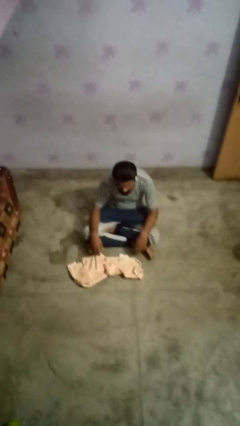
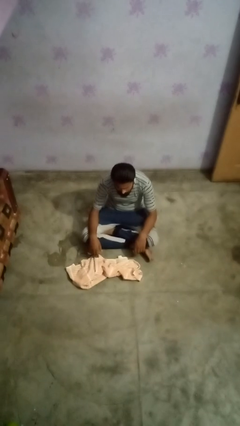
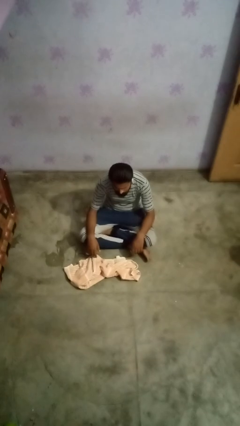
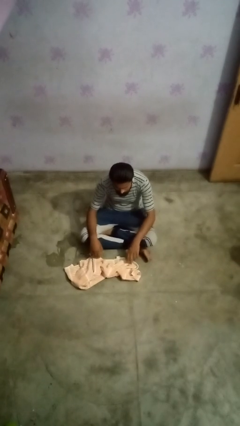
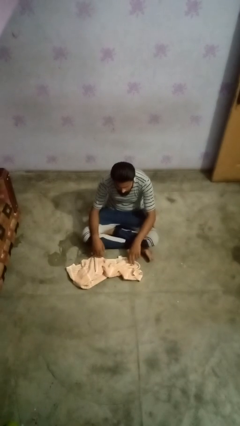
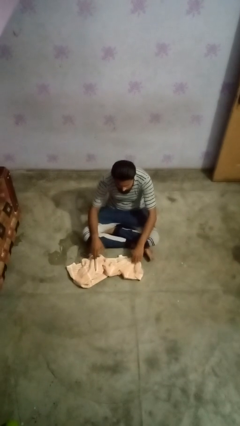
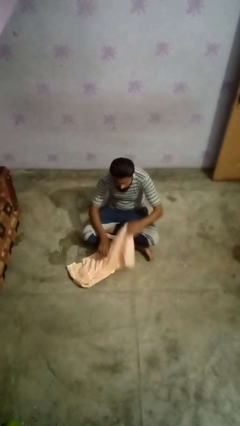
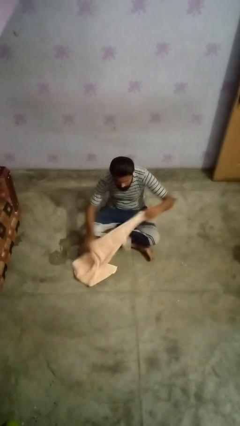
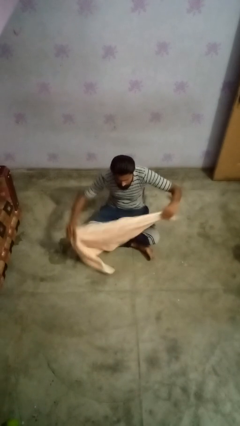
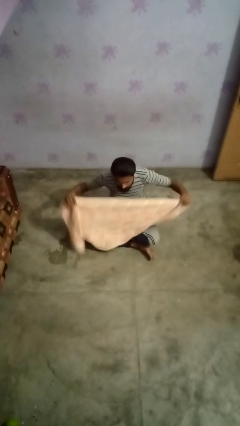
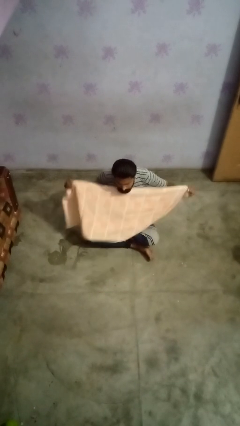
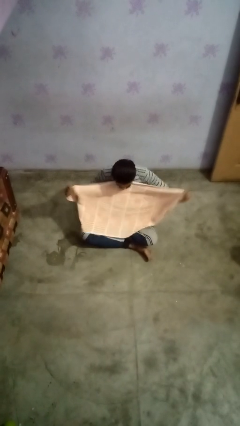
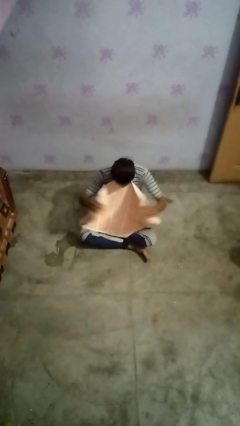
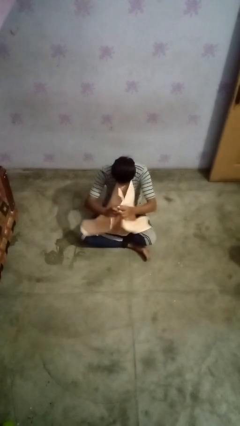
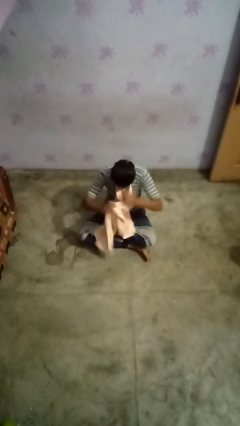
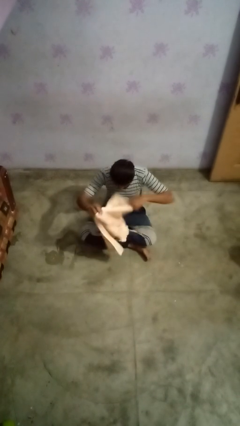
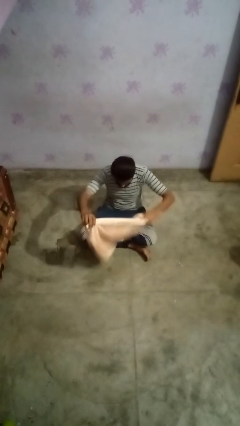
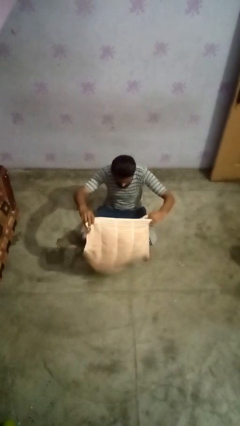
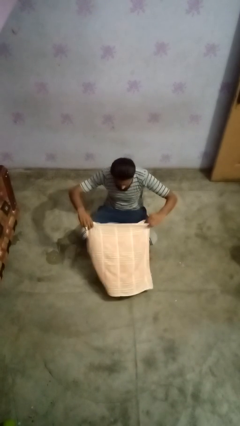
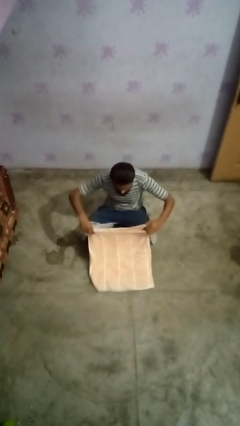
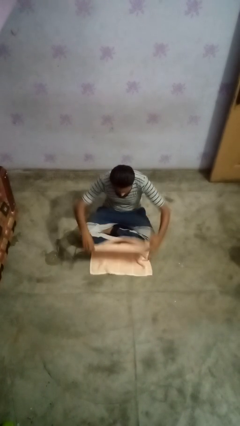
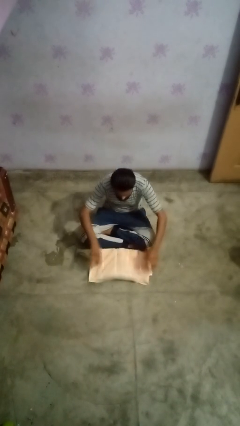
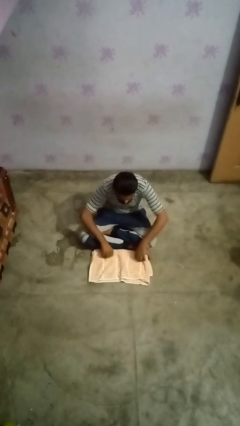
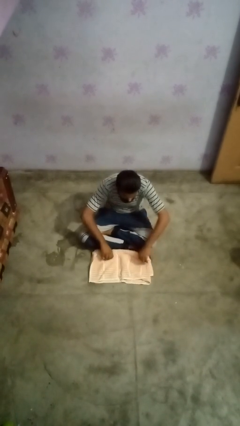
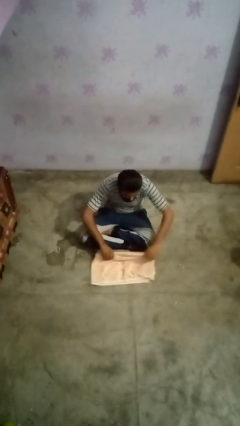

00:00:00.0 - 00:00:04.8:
person folds towel

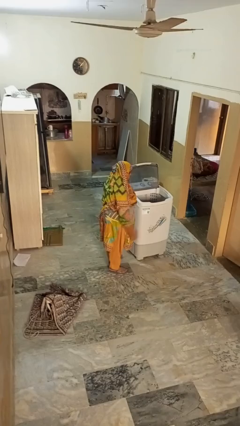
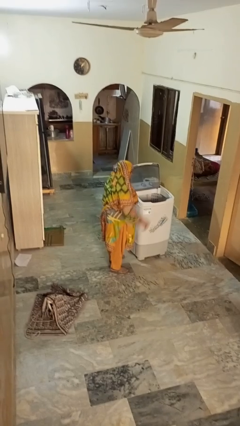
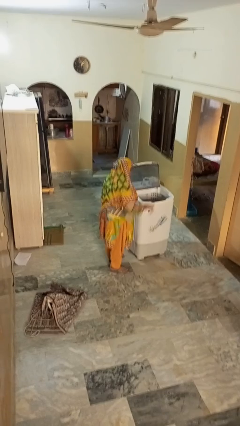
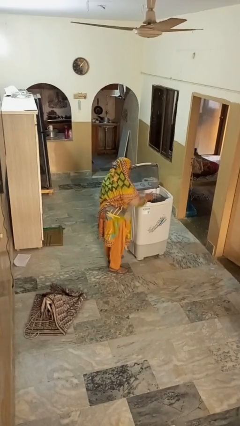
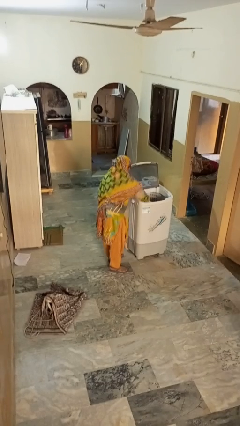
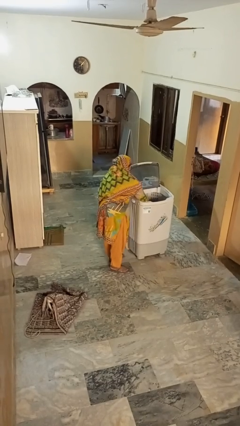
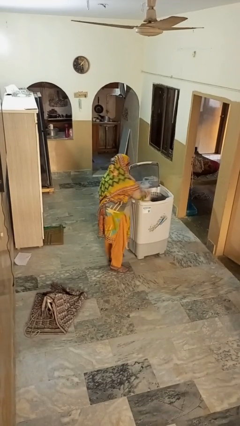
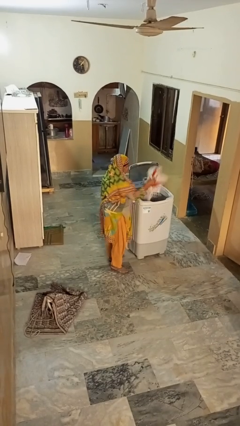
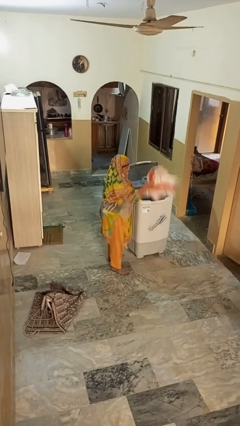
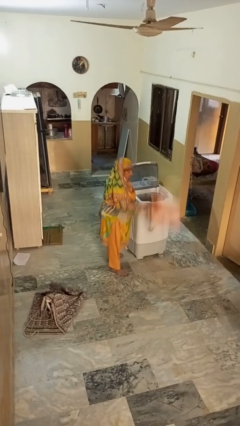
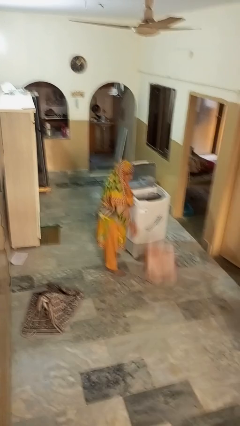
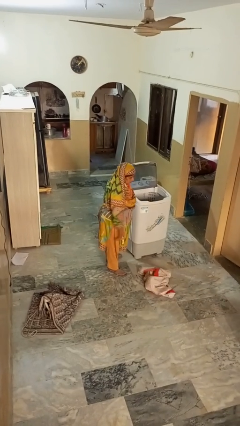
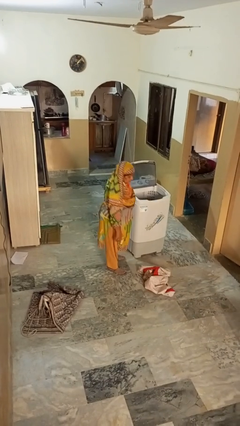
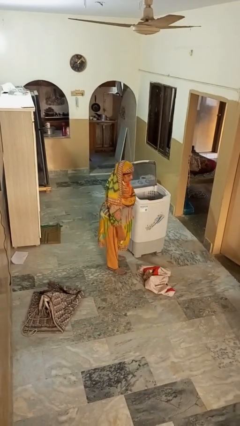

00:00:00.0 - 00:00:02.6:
person unloads clotheswasher

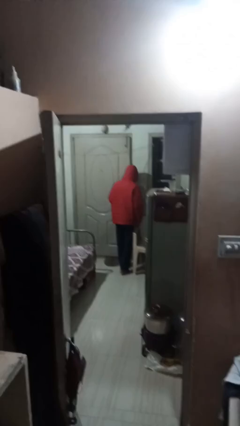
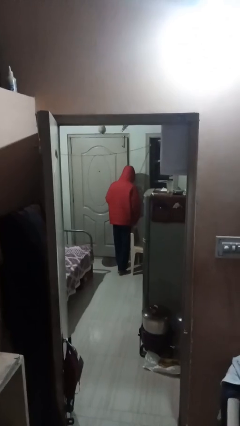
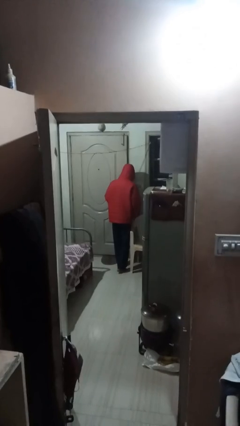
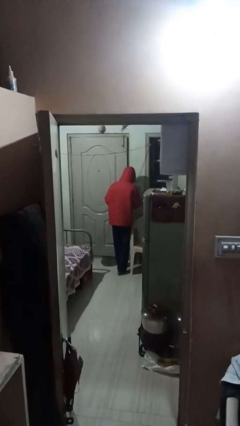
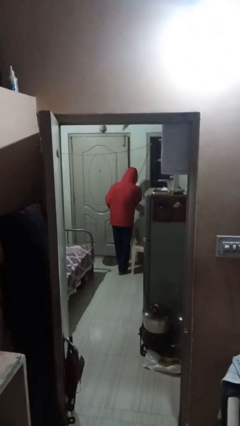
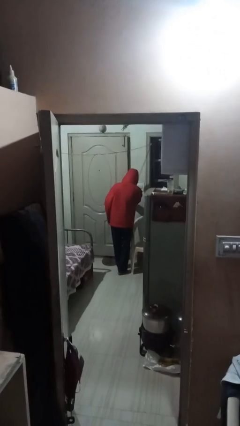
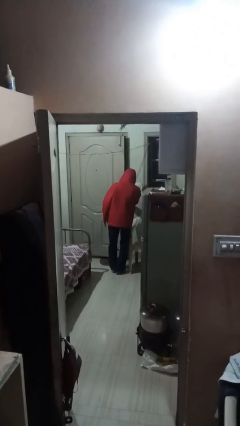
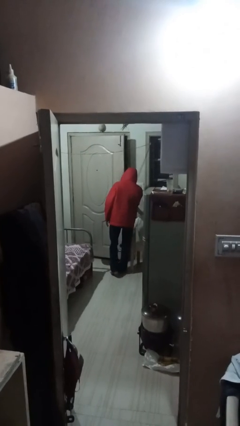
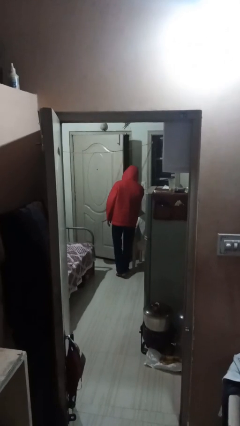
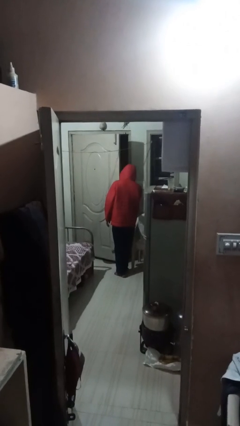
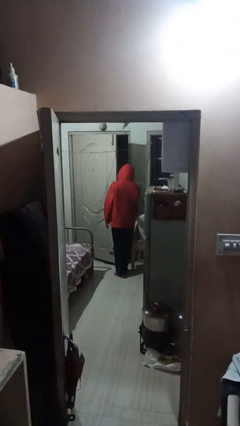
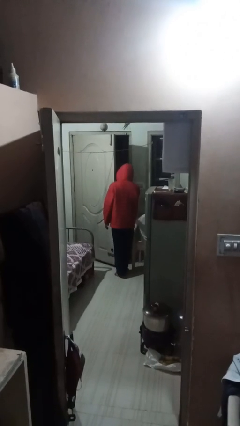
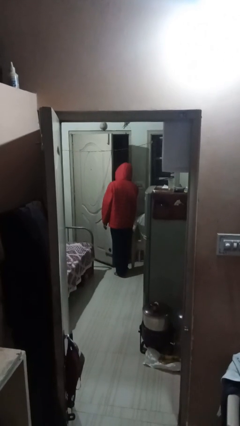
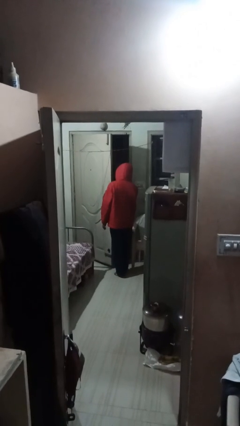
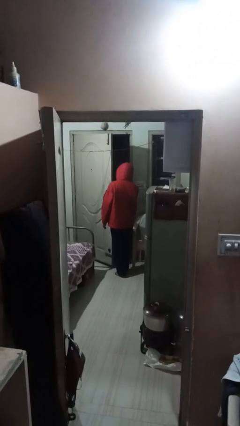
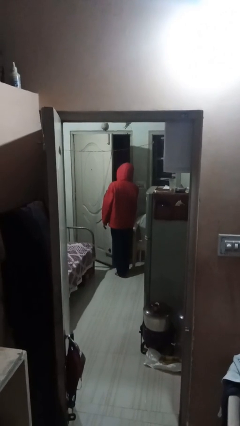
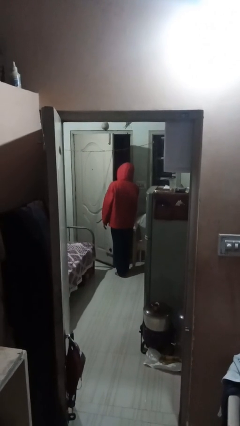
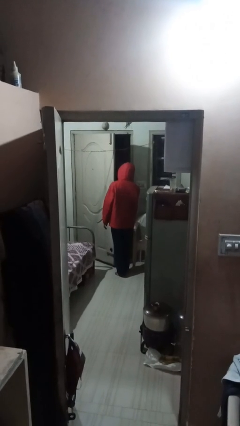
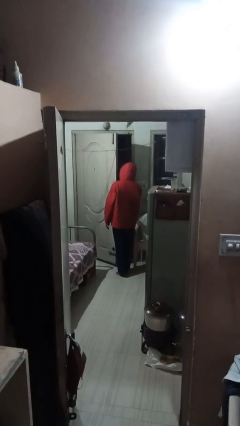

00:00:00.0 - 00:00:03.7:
person opens facility door

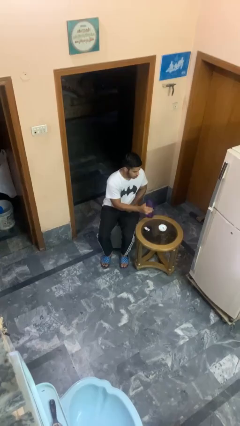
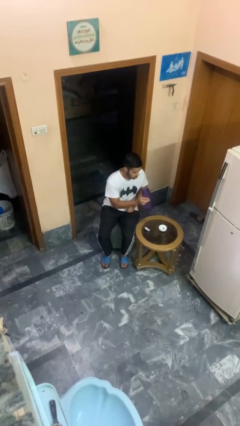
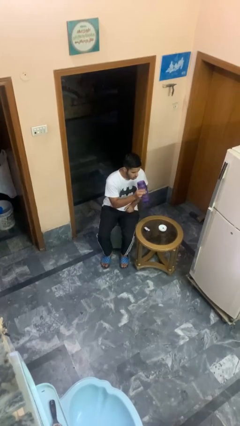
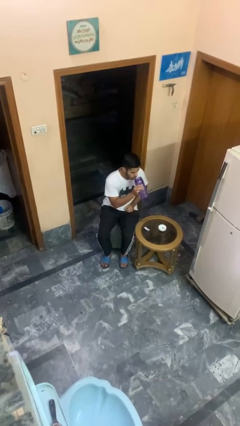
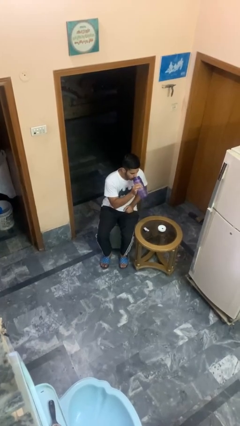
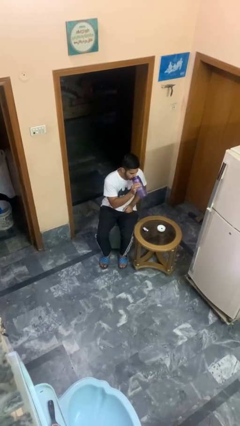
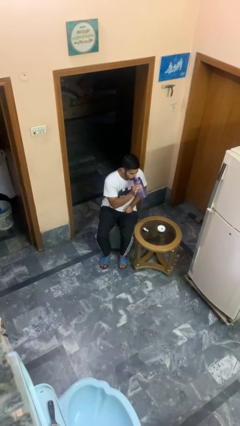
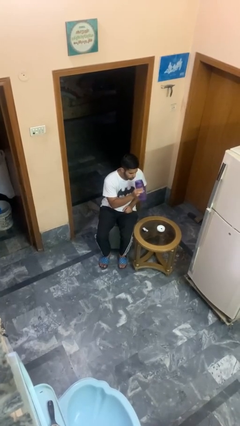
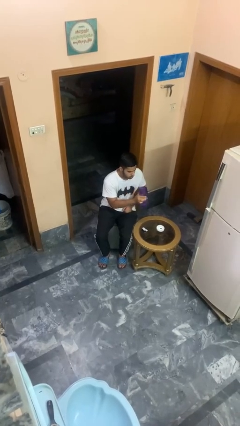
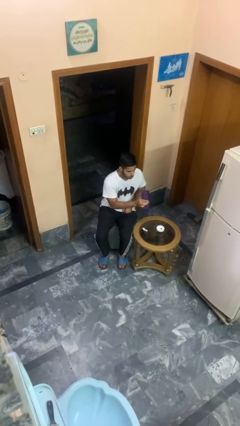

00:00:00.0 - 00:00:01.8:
person drinks from cup

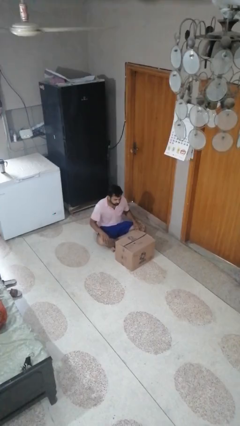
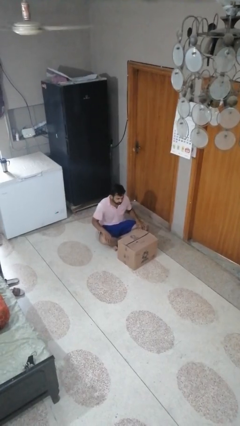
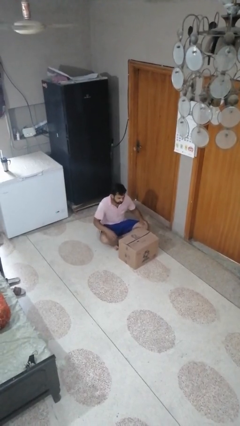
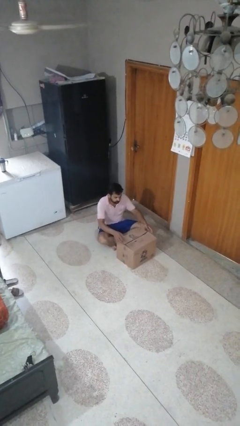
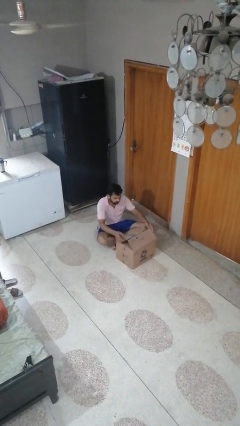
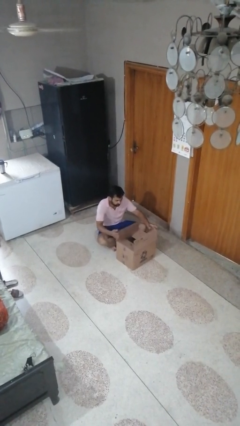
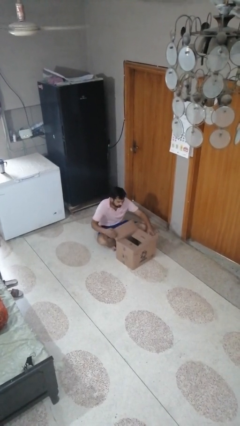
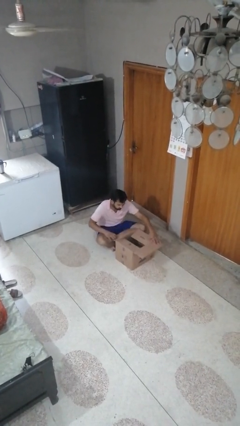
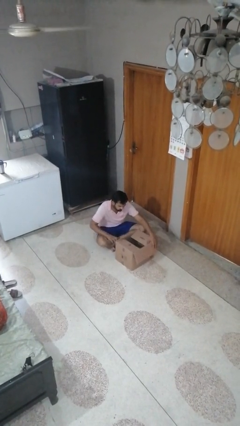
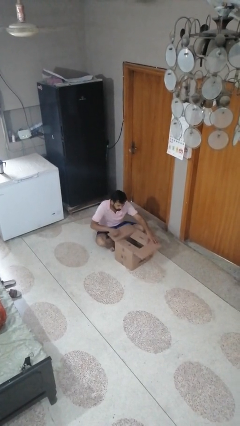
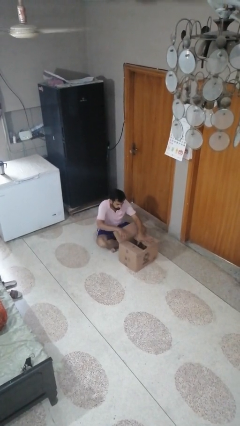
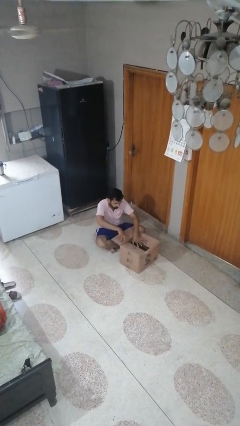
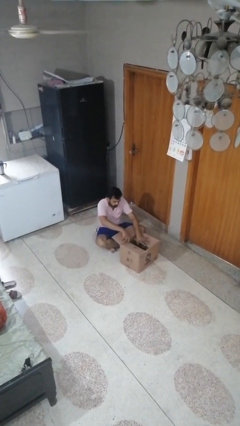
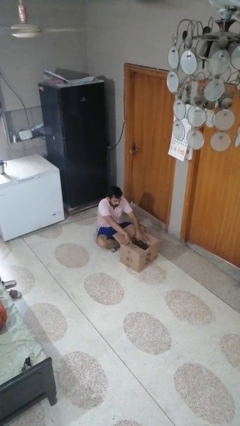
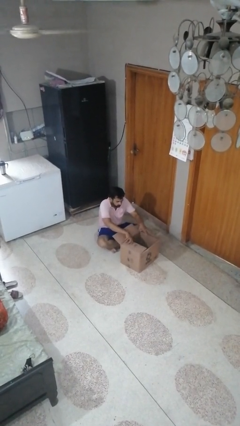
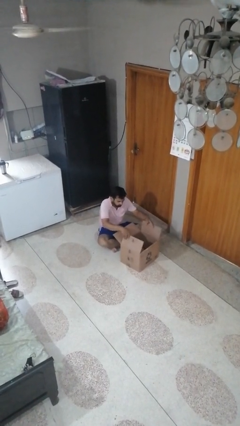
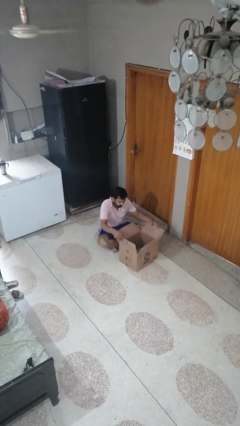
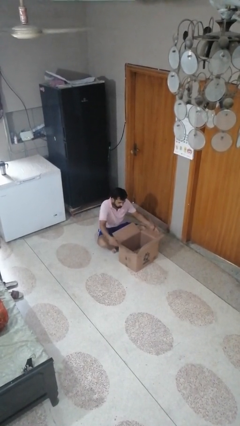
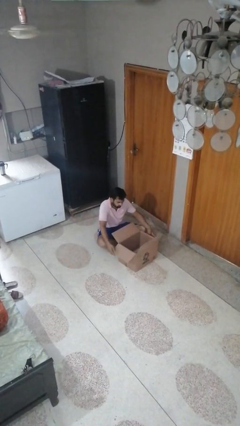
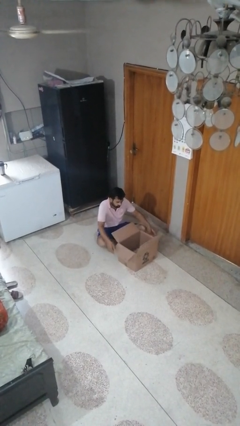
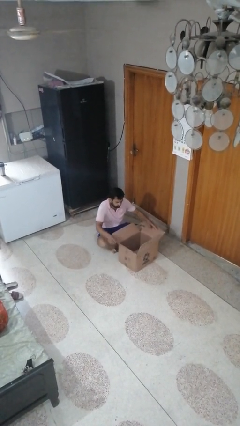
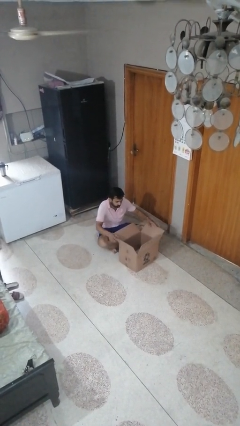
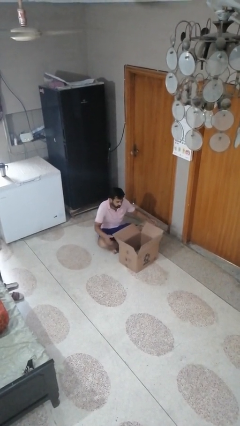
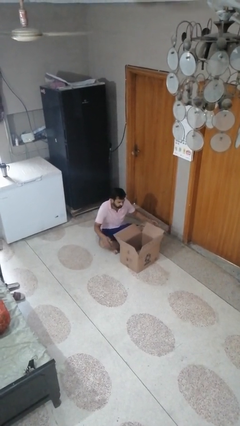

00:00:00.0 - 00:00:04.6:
person opens box

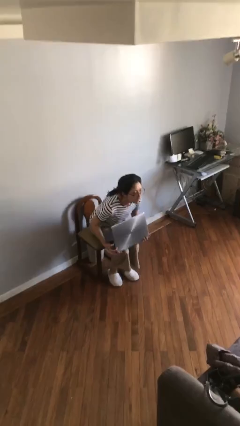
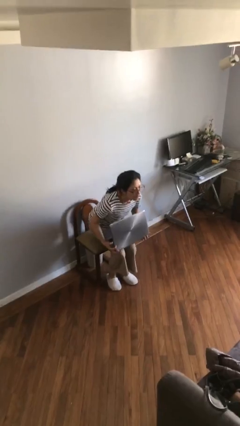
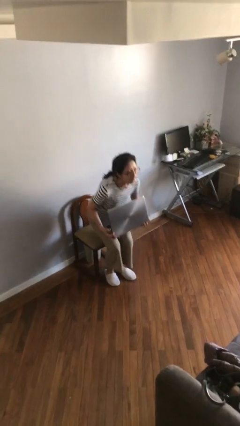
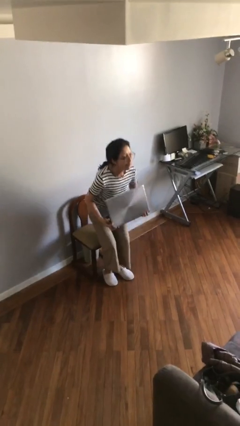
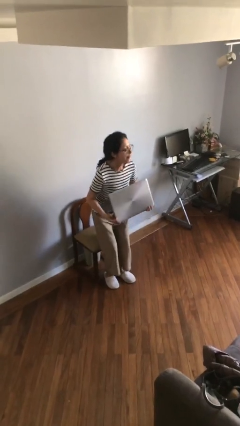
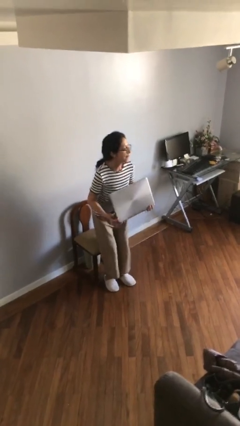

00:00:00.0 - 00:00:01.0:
person stands up
